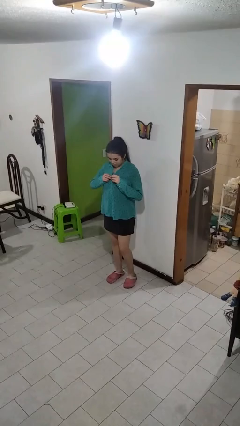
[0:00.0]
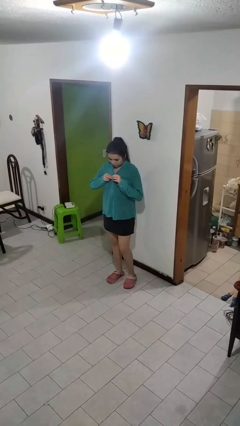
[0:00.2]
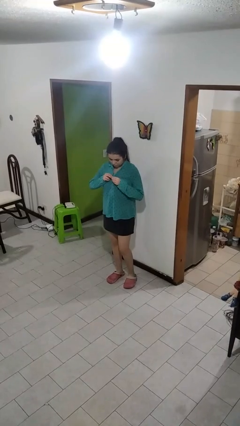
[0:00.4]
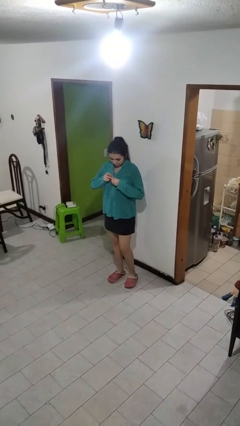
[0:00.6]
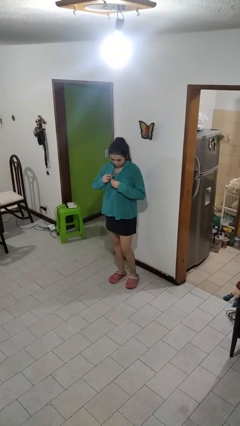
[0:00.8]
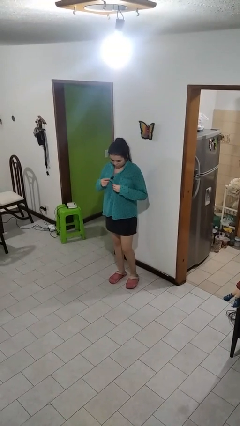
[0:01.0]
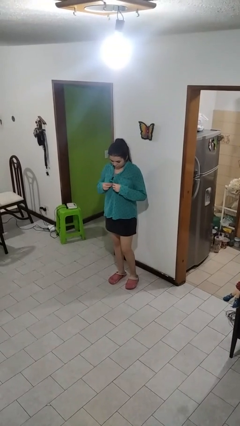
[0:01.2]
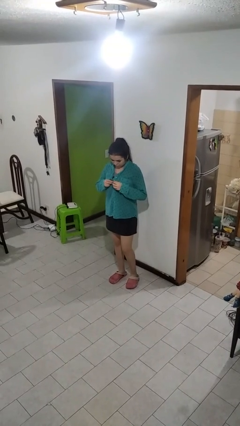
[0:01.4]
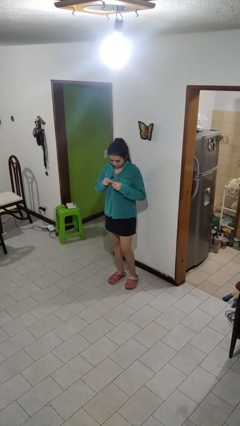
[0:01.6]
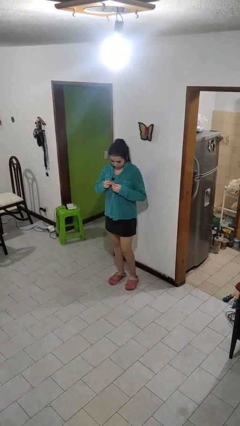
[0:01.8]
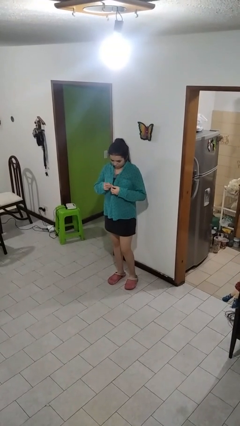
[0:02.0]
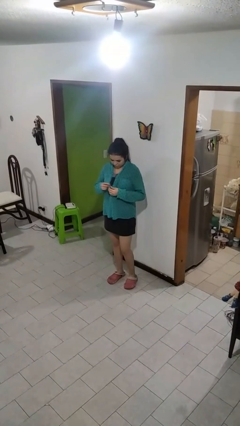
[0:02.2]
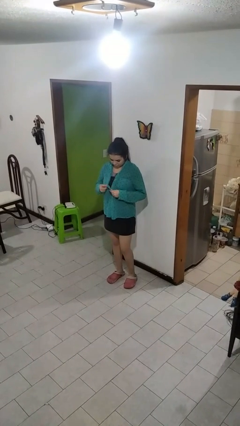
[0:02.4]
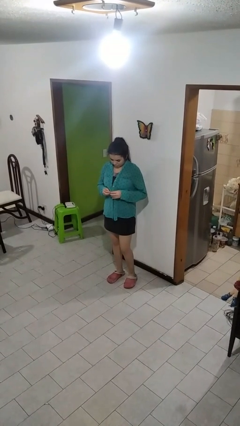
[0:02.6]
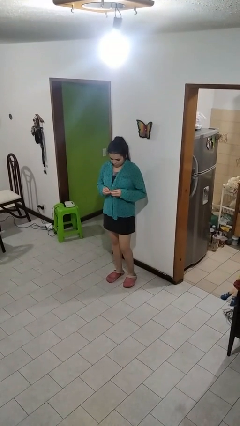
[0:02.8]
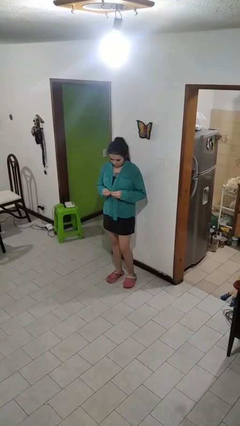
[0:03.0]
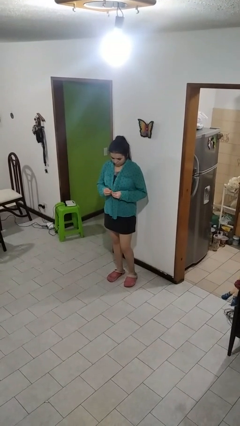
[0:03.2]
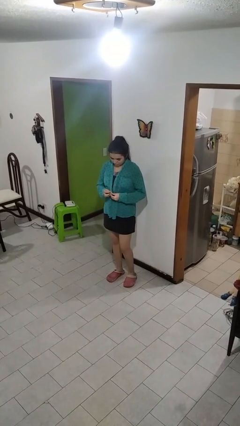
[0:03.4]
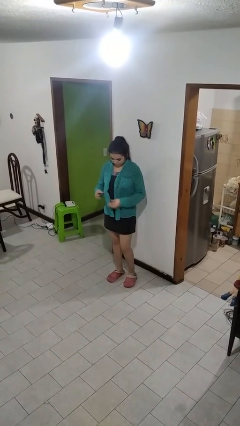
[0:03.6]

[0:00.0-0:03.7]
person unbuttons shirt

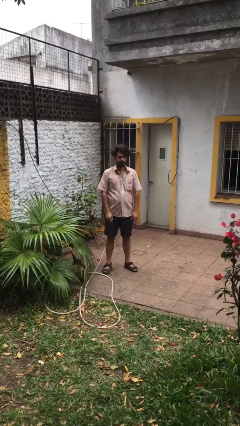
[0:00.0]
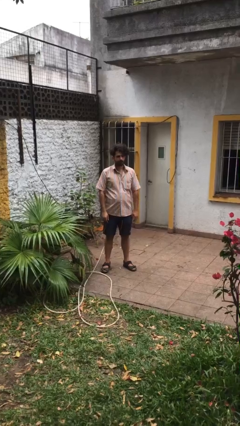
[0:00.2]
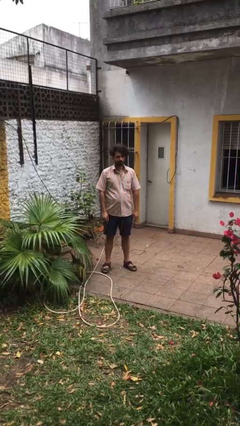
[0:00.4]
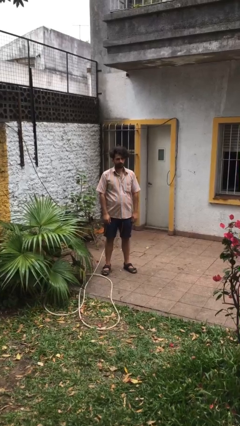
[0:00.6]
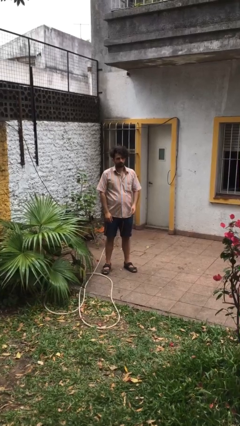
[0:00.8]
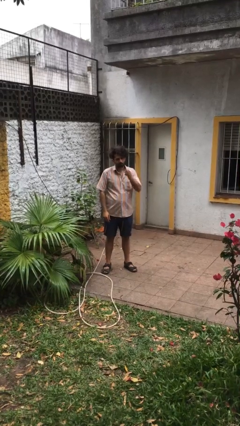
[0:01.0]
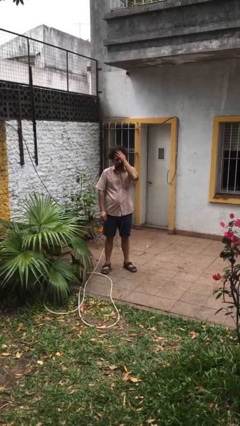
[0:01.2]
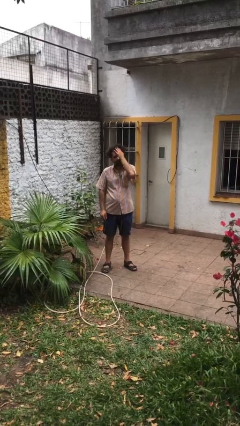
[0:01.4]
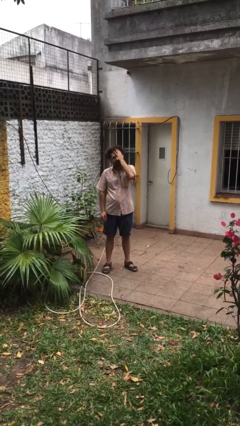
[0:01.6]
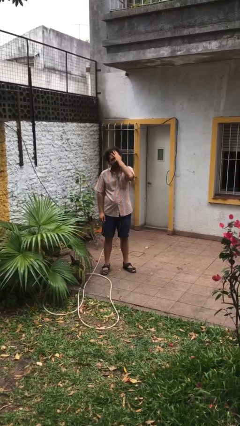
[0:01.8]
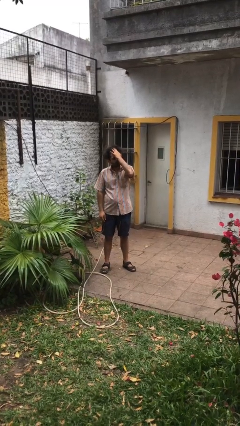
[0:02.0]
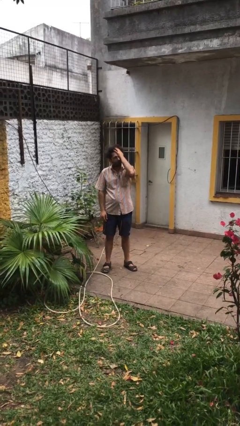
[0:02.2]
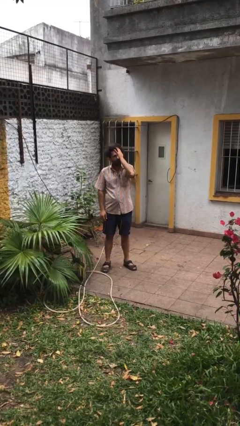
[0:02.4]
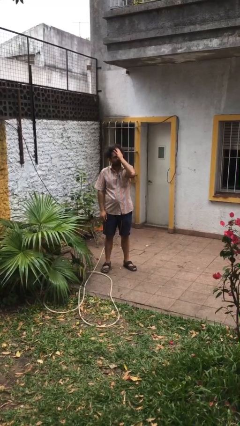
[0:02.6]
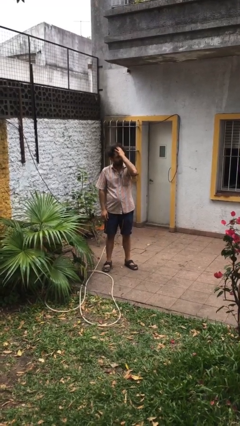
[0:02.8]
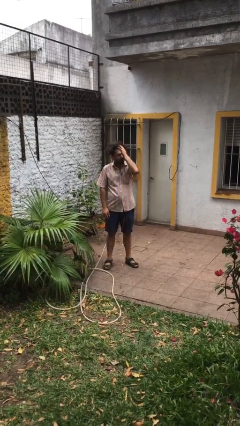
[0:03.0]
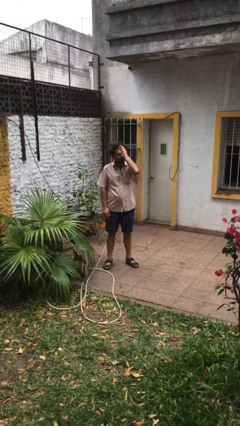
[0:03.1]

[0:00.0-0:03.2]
person rubs eyes

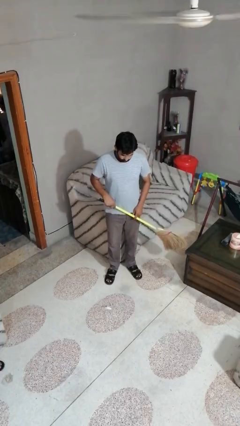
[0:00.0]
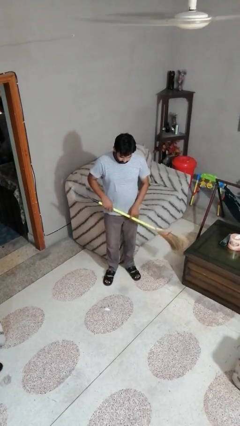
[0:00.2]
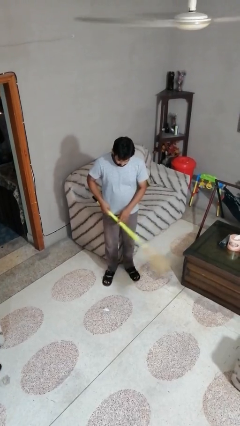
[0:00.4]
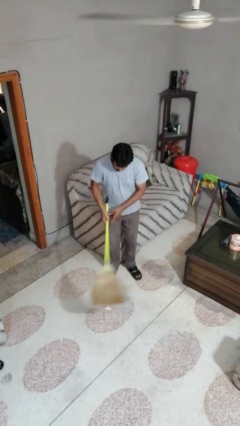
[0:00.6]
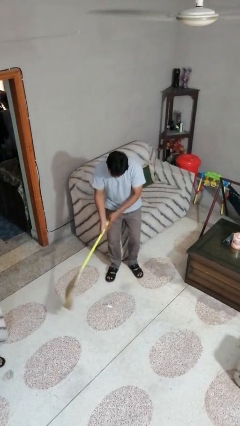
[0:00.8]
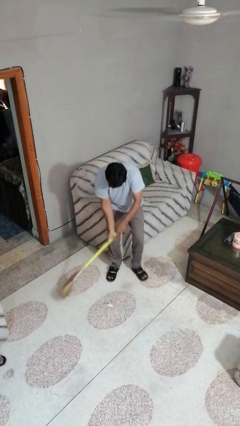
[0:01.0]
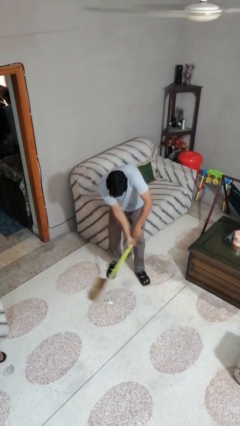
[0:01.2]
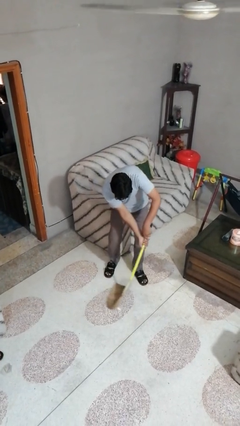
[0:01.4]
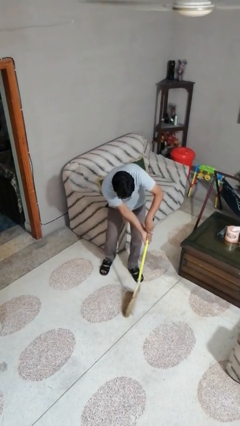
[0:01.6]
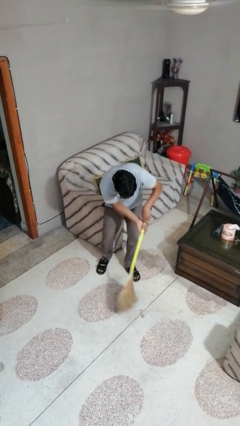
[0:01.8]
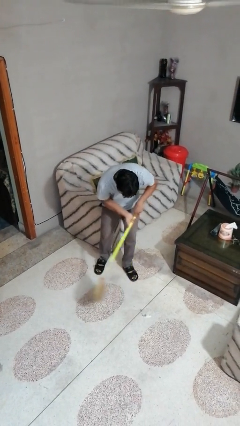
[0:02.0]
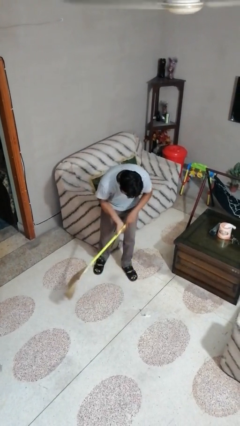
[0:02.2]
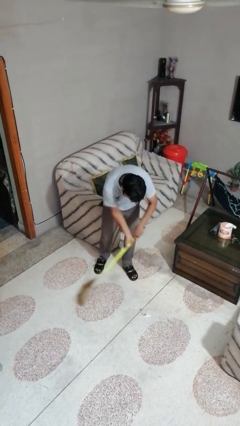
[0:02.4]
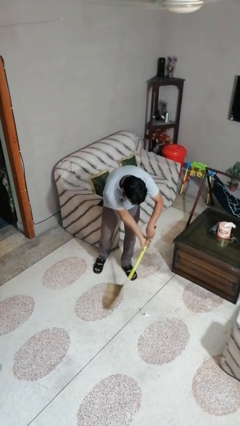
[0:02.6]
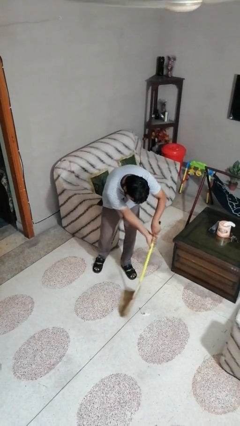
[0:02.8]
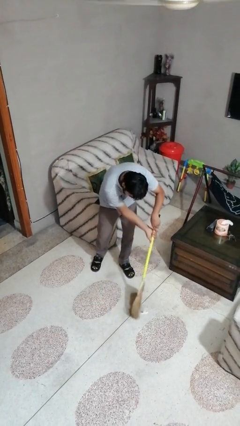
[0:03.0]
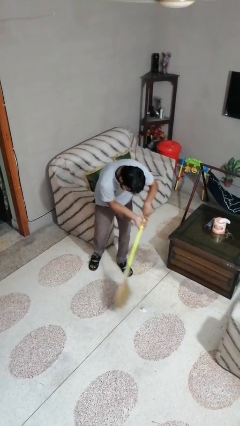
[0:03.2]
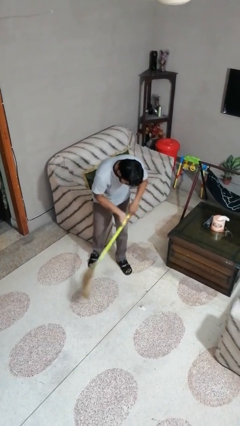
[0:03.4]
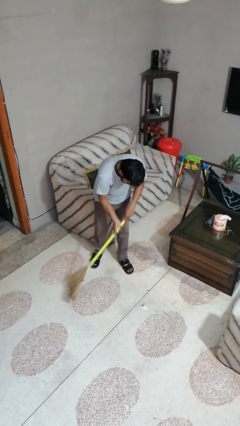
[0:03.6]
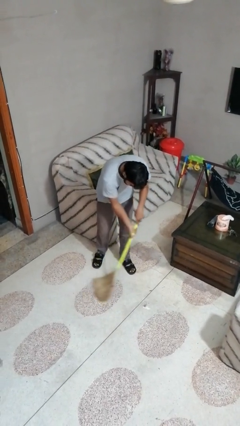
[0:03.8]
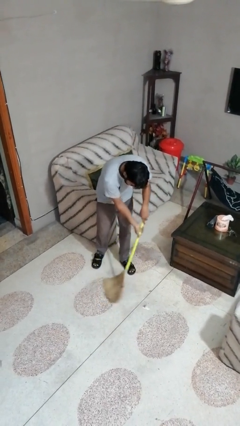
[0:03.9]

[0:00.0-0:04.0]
person sweeps floor

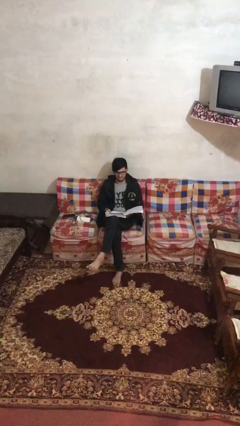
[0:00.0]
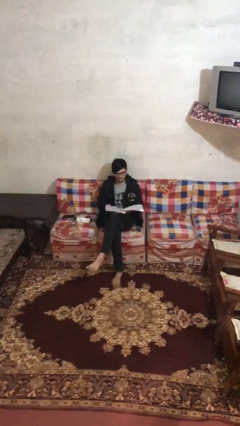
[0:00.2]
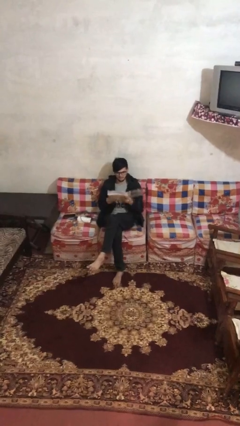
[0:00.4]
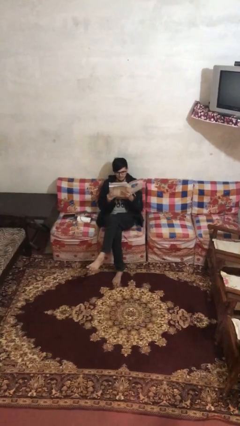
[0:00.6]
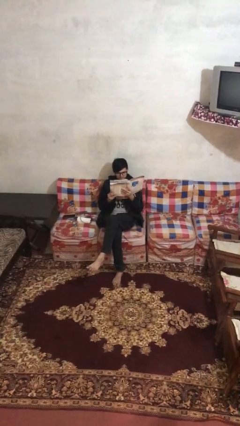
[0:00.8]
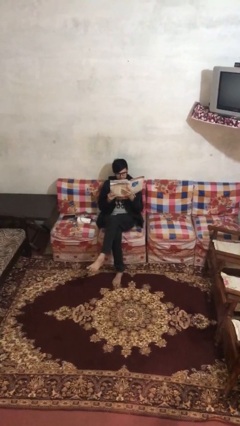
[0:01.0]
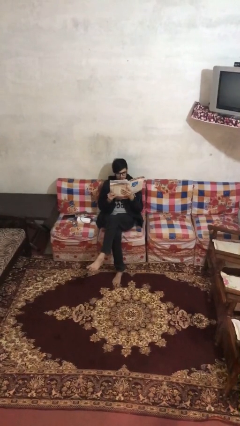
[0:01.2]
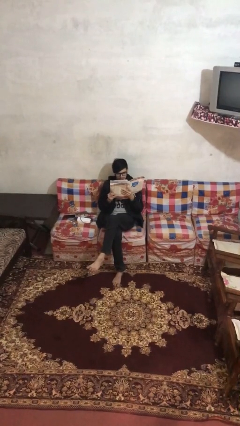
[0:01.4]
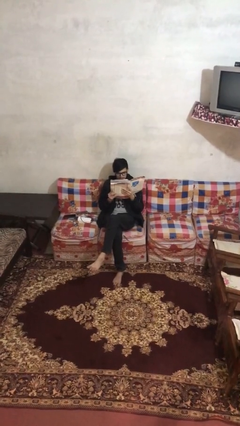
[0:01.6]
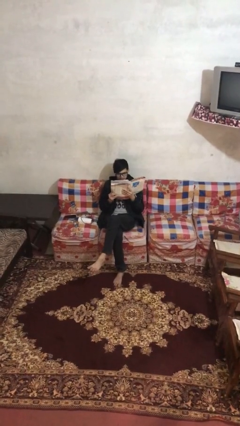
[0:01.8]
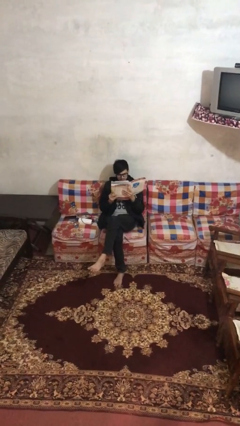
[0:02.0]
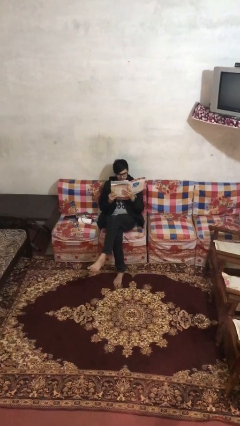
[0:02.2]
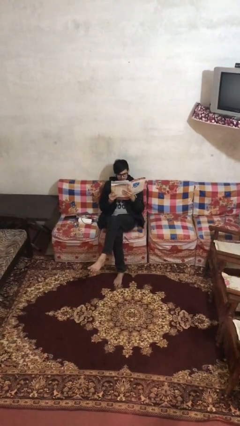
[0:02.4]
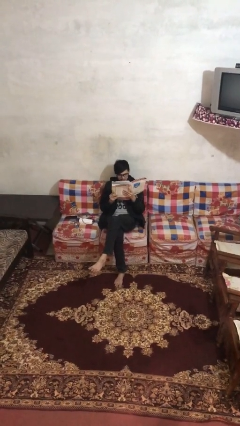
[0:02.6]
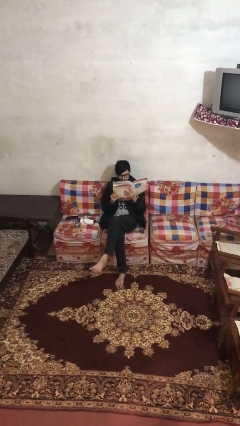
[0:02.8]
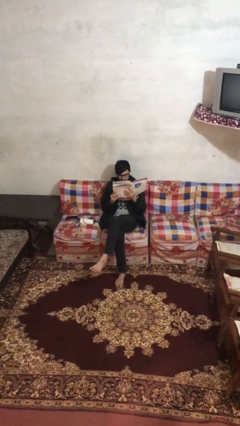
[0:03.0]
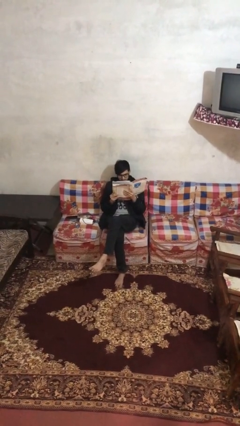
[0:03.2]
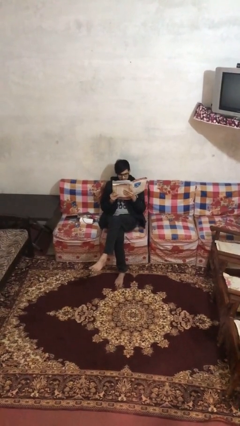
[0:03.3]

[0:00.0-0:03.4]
person reads document

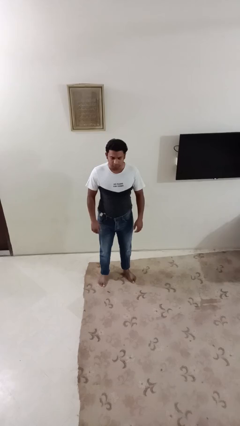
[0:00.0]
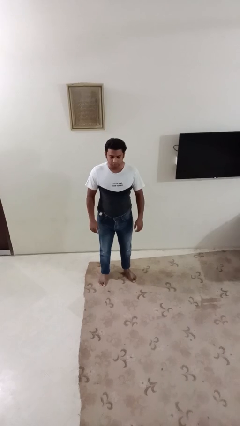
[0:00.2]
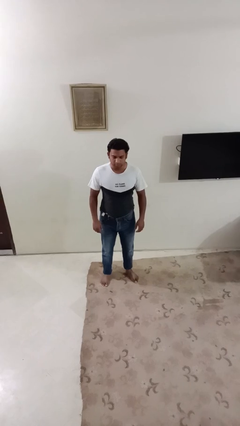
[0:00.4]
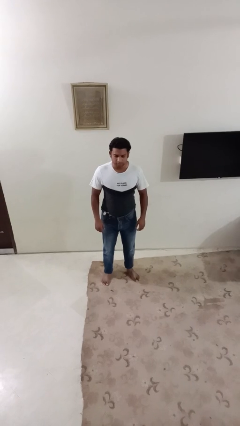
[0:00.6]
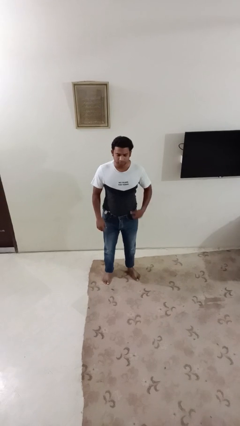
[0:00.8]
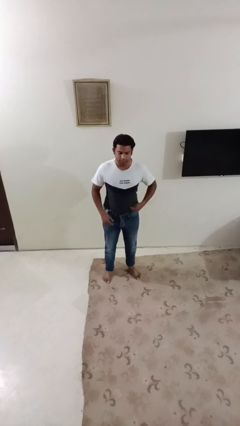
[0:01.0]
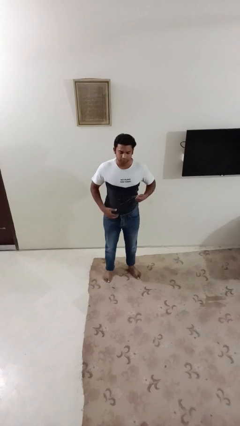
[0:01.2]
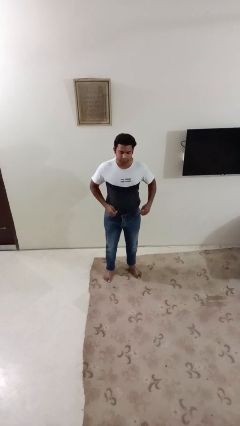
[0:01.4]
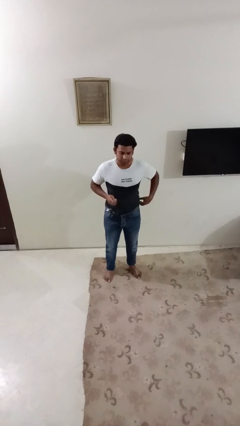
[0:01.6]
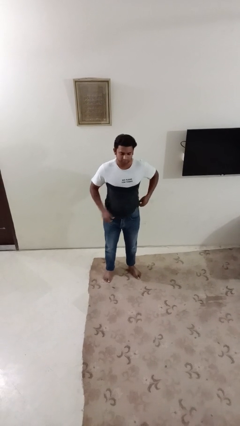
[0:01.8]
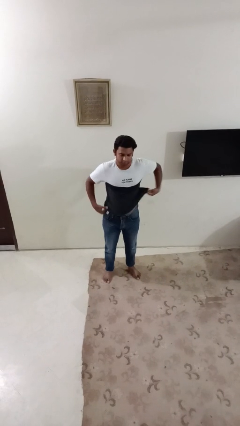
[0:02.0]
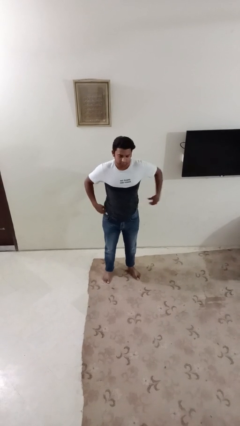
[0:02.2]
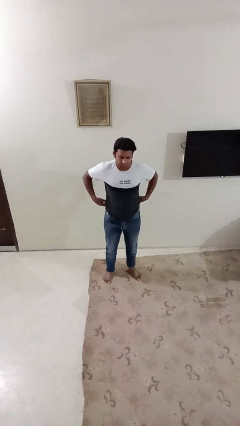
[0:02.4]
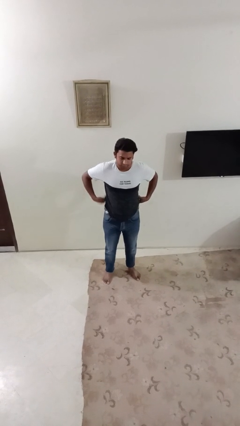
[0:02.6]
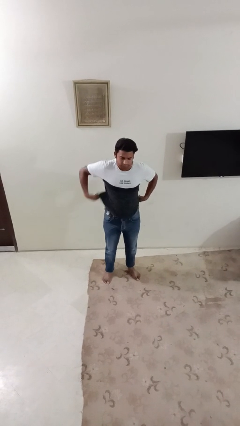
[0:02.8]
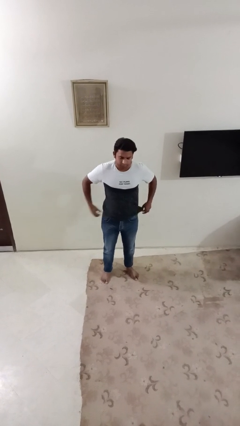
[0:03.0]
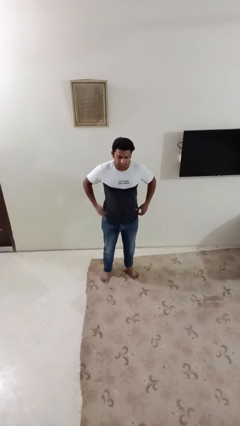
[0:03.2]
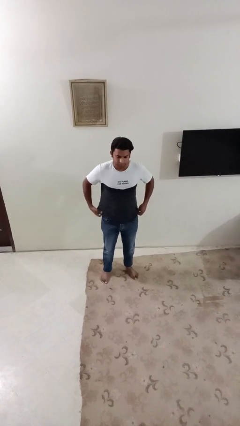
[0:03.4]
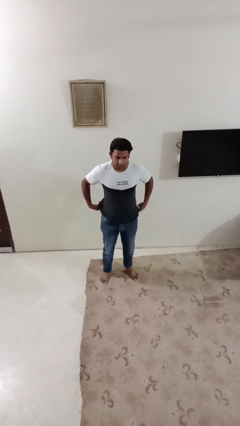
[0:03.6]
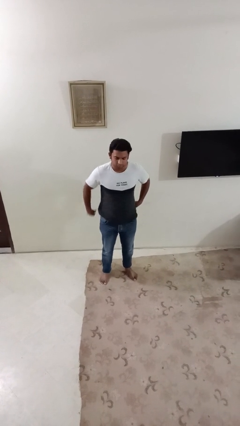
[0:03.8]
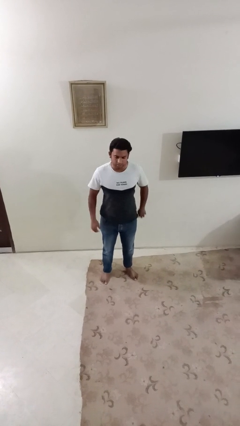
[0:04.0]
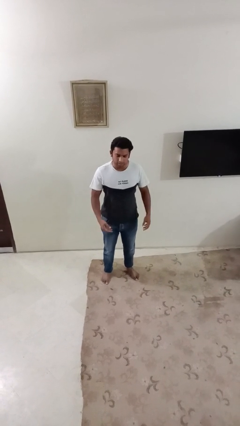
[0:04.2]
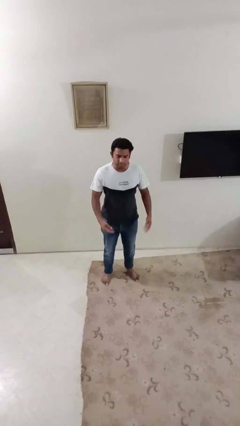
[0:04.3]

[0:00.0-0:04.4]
person untucks shirt
